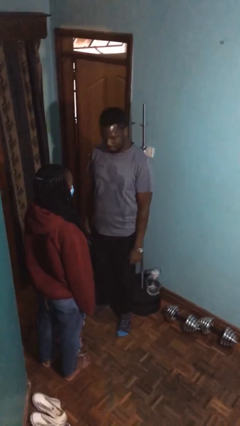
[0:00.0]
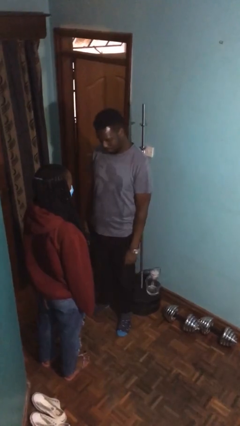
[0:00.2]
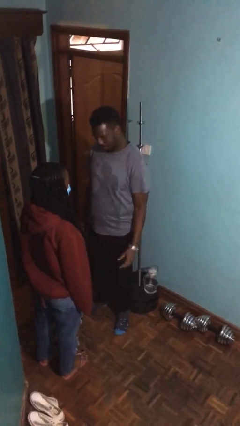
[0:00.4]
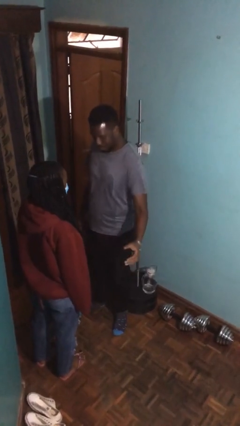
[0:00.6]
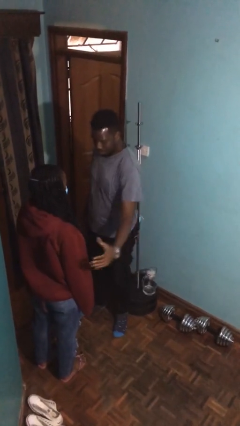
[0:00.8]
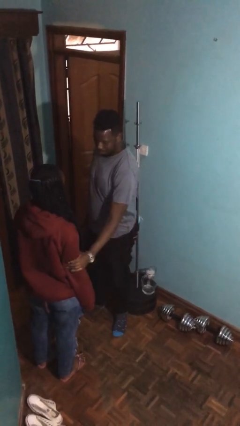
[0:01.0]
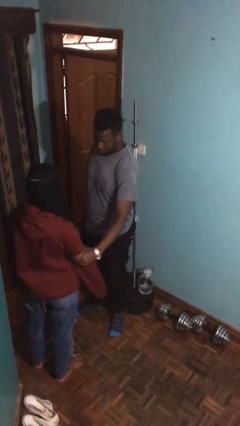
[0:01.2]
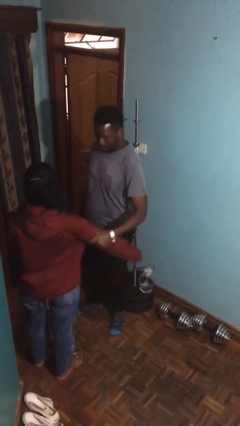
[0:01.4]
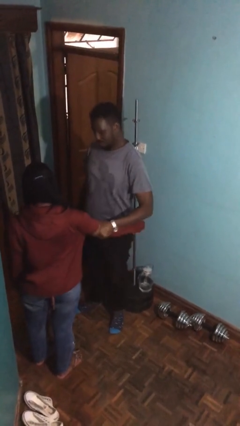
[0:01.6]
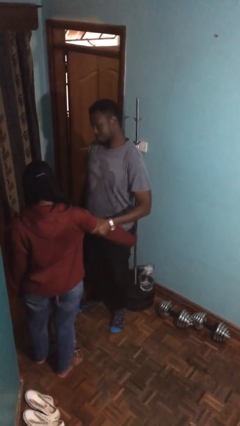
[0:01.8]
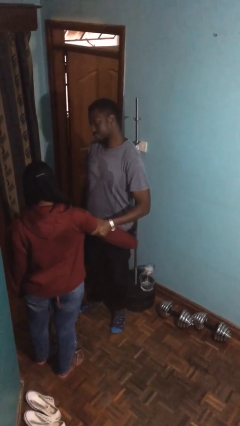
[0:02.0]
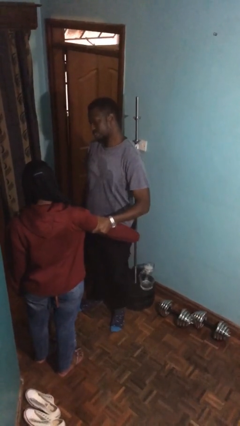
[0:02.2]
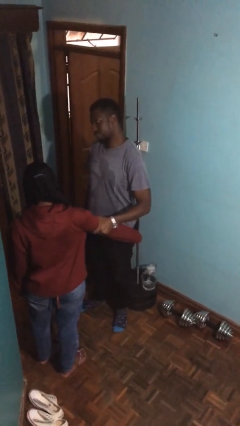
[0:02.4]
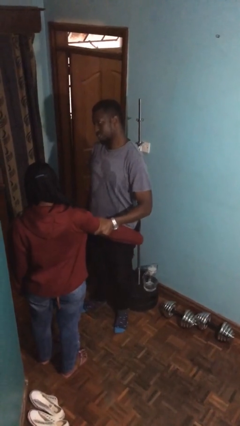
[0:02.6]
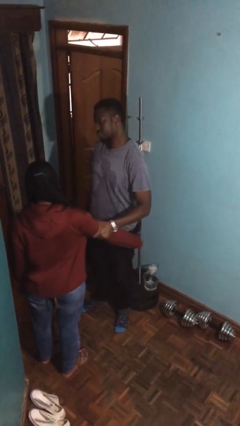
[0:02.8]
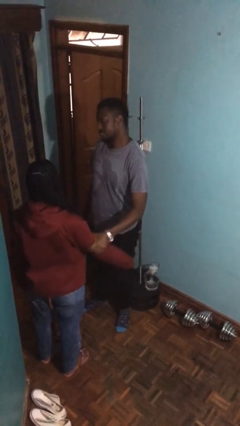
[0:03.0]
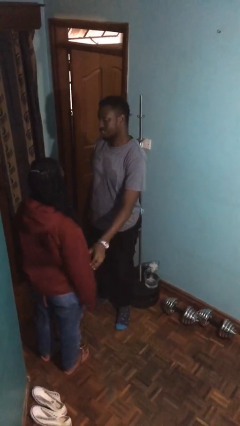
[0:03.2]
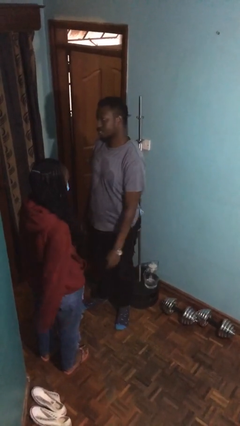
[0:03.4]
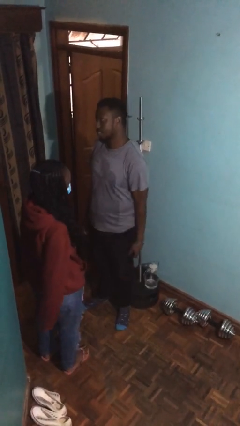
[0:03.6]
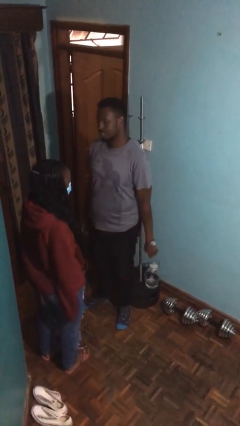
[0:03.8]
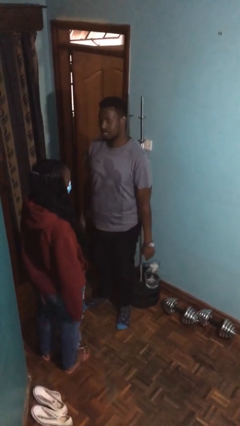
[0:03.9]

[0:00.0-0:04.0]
person grabs person by bicep

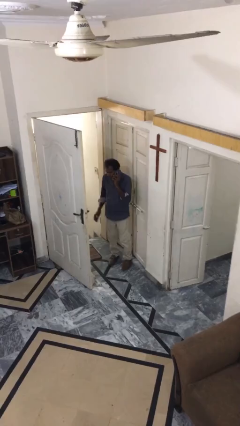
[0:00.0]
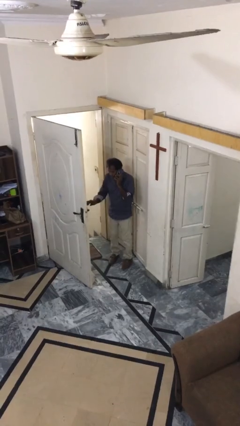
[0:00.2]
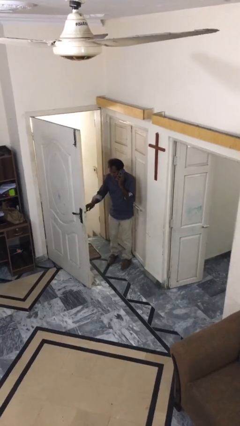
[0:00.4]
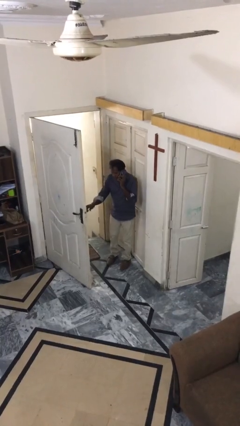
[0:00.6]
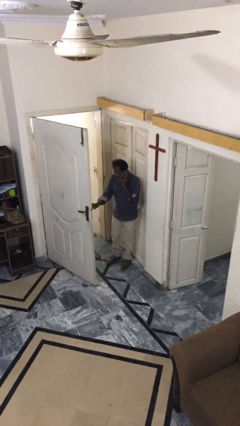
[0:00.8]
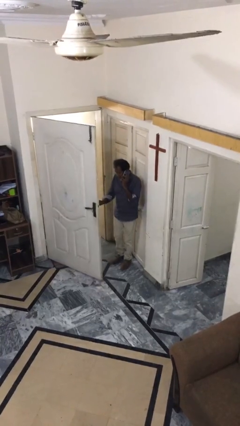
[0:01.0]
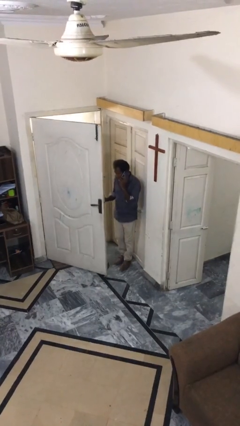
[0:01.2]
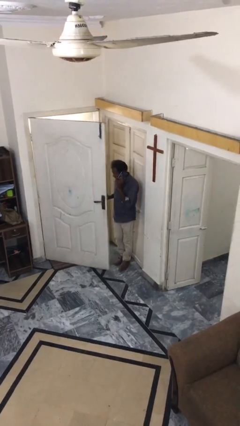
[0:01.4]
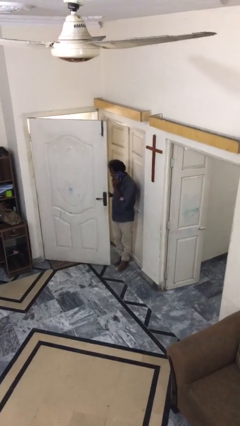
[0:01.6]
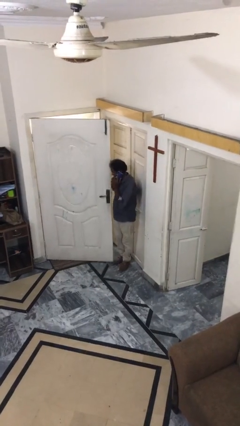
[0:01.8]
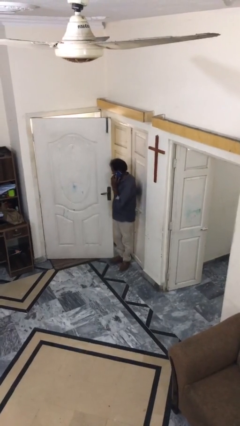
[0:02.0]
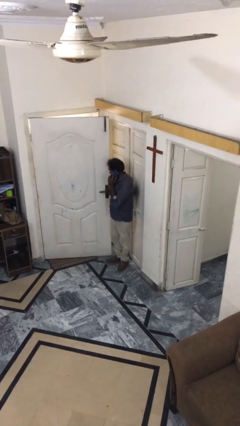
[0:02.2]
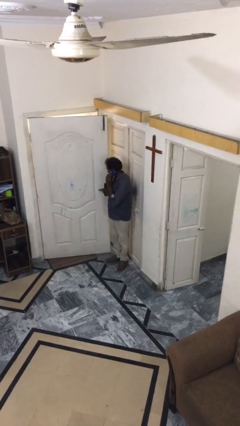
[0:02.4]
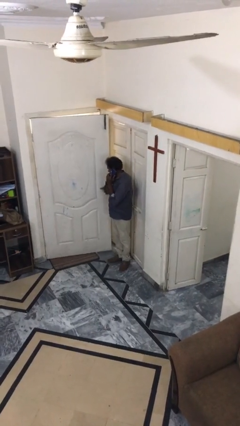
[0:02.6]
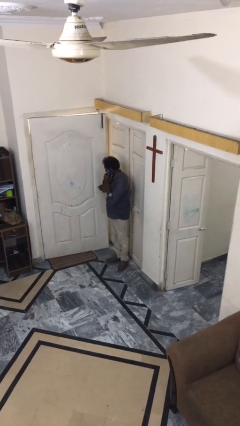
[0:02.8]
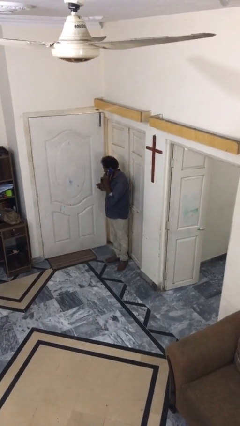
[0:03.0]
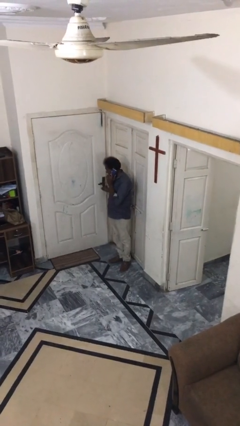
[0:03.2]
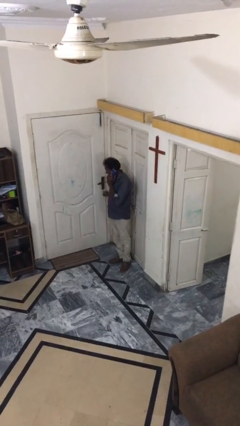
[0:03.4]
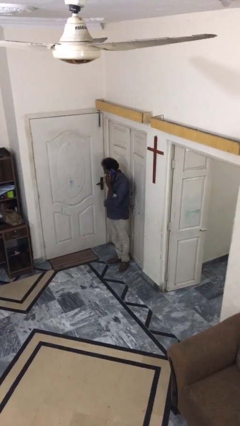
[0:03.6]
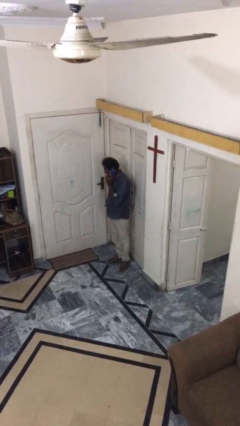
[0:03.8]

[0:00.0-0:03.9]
person closes facility door

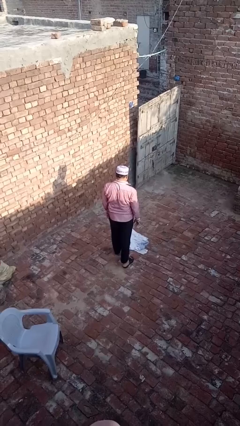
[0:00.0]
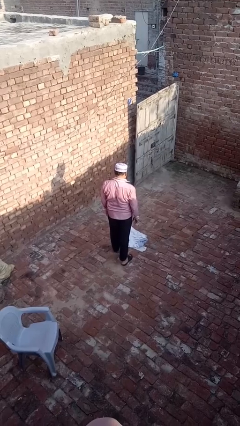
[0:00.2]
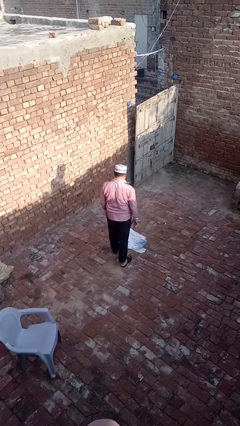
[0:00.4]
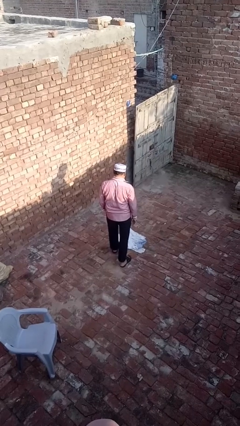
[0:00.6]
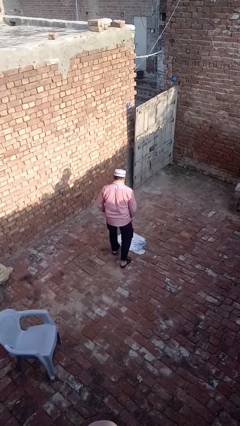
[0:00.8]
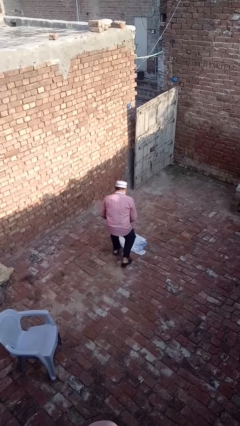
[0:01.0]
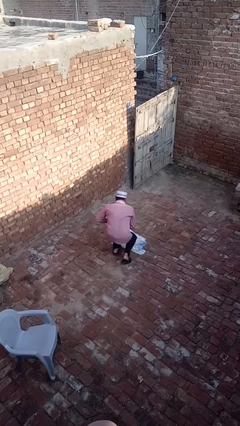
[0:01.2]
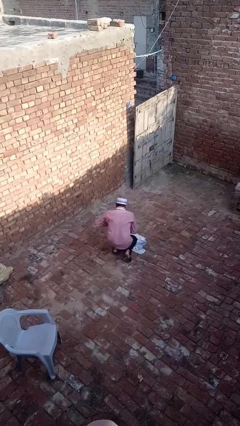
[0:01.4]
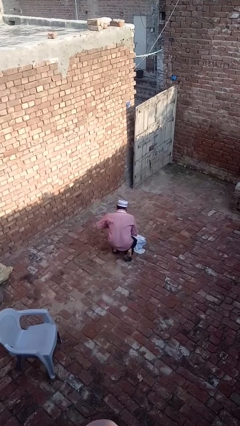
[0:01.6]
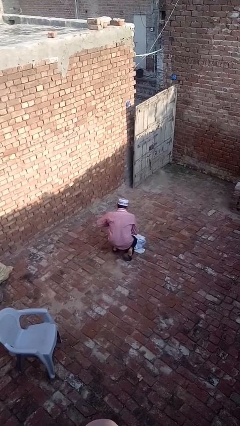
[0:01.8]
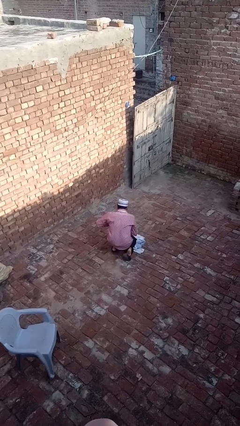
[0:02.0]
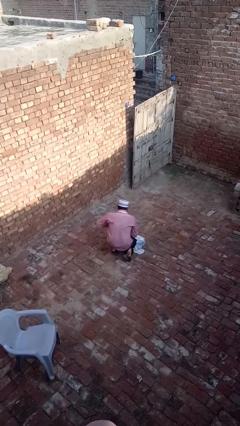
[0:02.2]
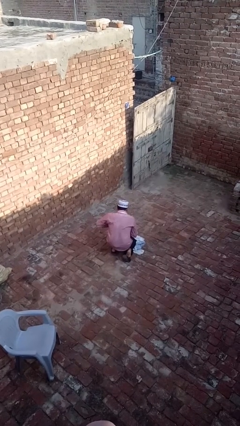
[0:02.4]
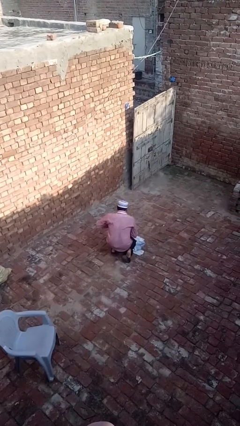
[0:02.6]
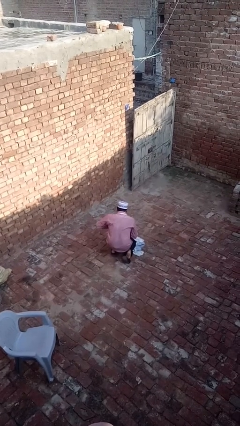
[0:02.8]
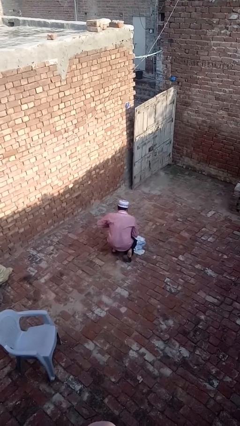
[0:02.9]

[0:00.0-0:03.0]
person kneels

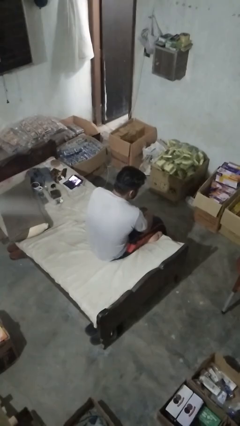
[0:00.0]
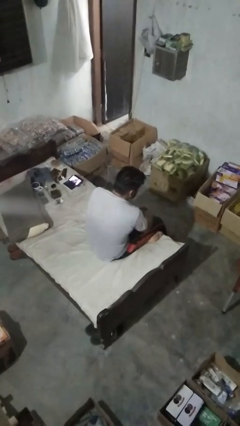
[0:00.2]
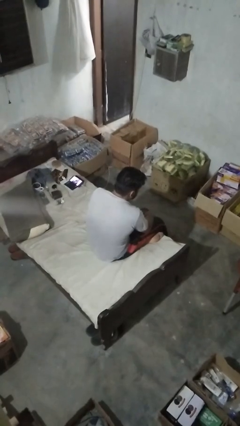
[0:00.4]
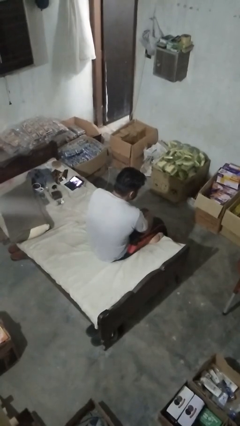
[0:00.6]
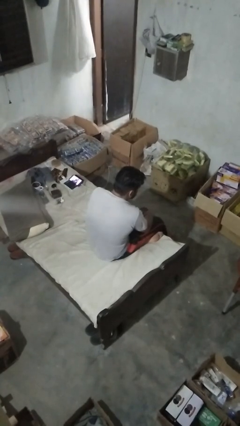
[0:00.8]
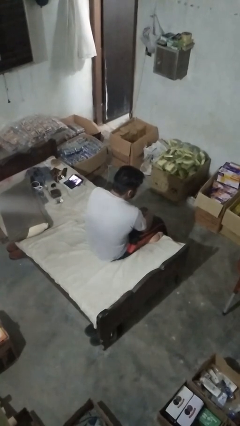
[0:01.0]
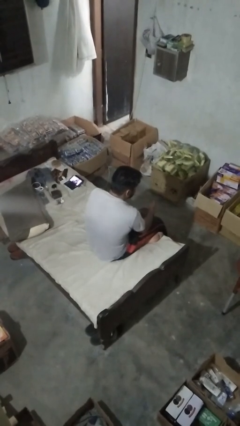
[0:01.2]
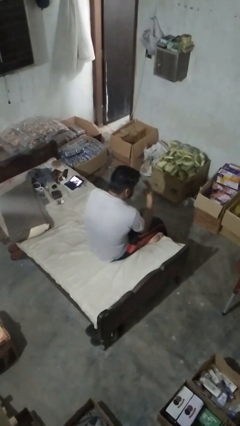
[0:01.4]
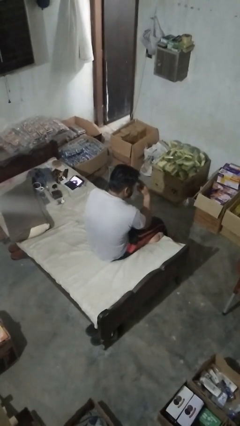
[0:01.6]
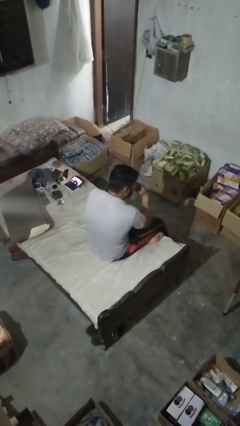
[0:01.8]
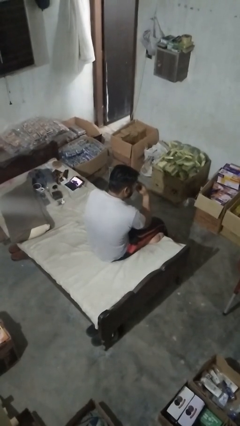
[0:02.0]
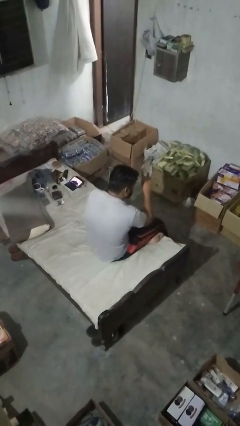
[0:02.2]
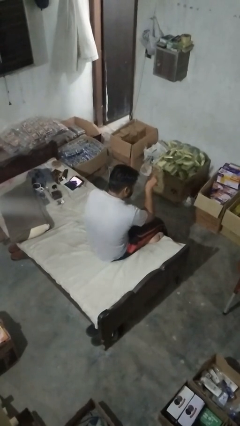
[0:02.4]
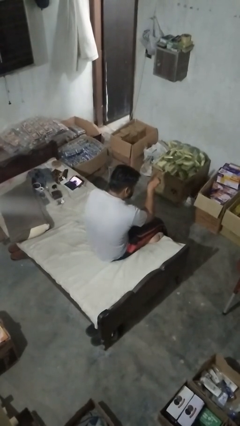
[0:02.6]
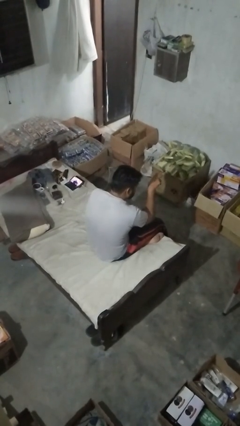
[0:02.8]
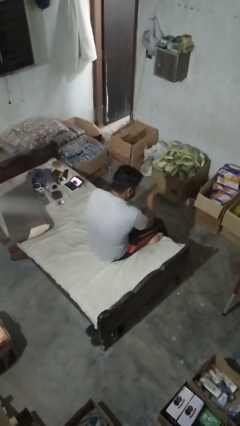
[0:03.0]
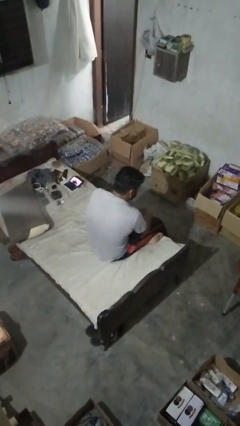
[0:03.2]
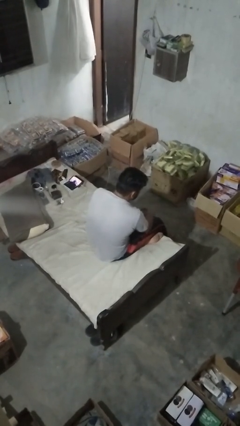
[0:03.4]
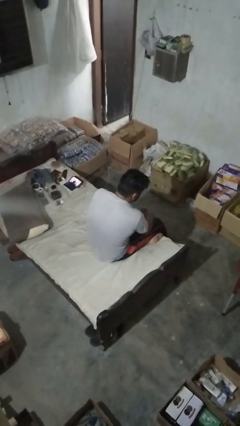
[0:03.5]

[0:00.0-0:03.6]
person gestures watch closely

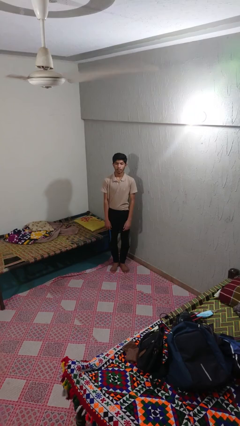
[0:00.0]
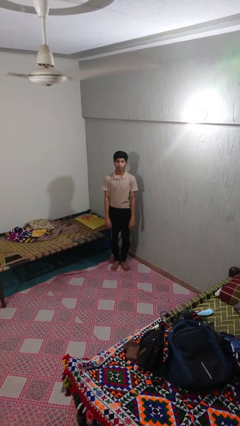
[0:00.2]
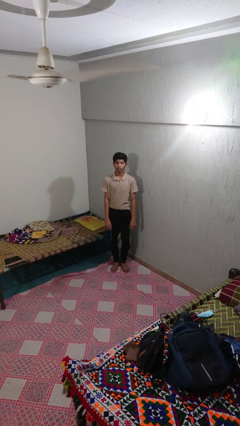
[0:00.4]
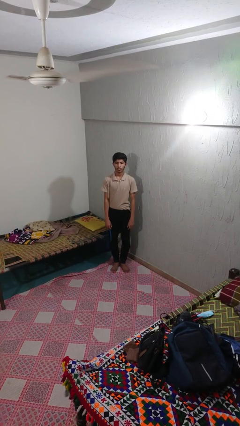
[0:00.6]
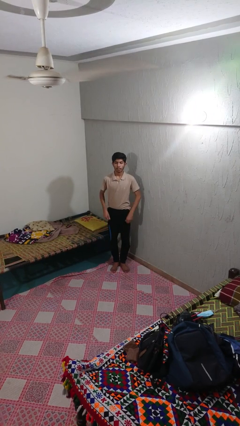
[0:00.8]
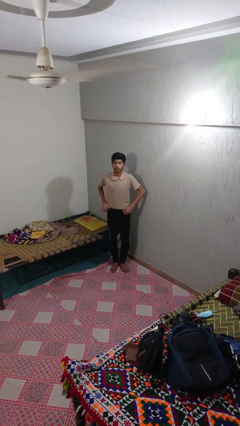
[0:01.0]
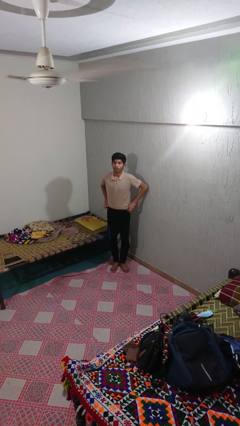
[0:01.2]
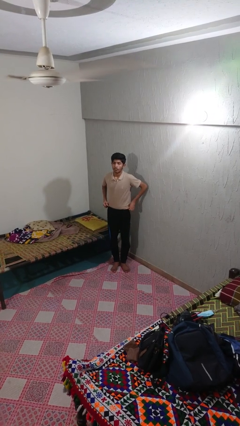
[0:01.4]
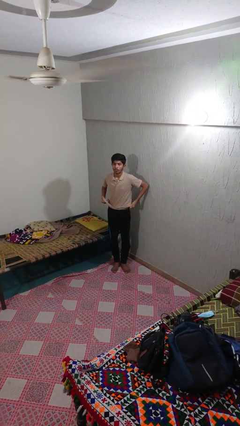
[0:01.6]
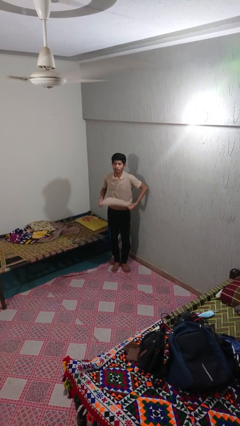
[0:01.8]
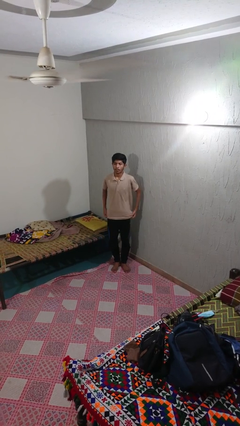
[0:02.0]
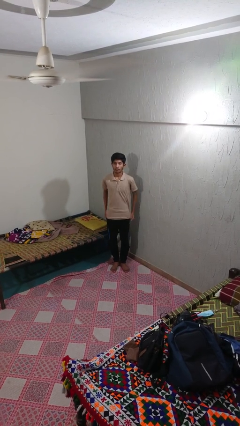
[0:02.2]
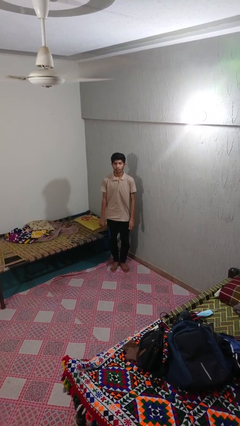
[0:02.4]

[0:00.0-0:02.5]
person untucks shirt

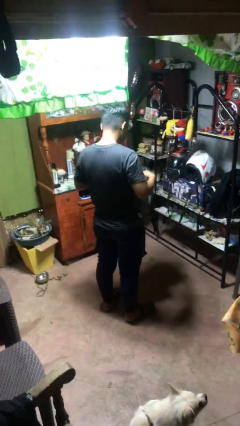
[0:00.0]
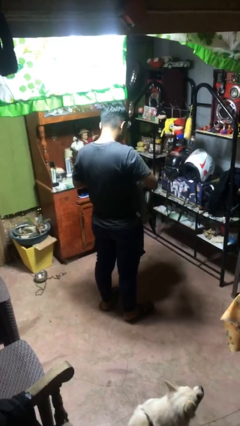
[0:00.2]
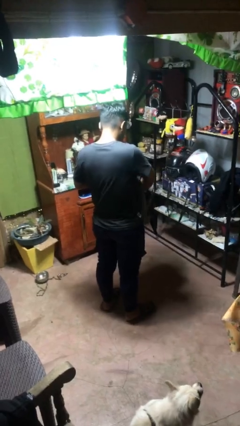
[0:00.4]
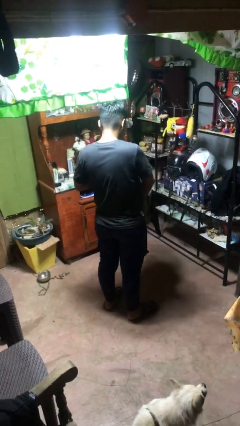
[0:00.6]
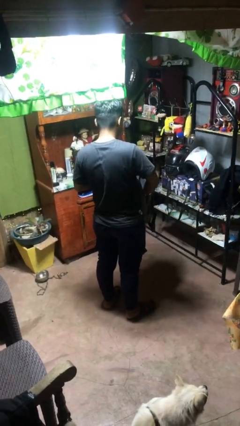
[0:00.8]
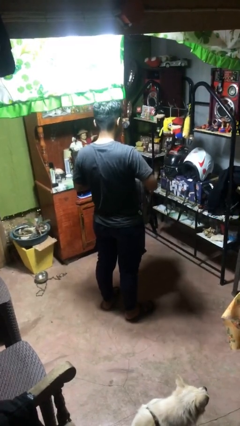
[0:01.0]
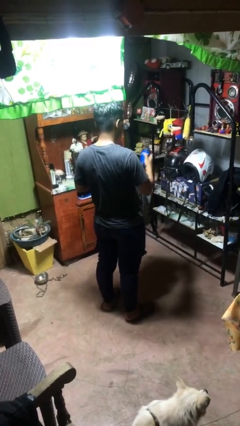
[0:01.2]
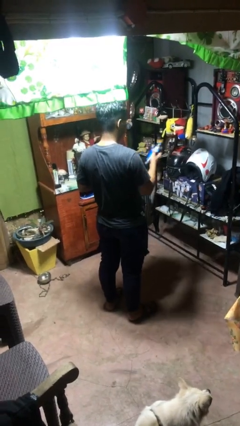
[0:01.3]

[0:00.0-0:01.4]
person takes object from bag
